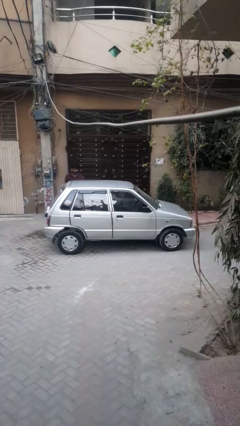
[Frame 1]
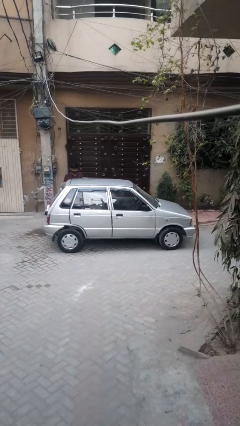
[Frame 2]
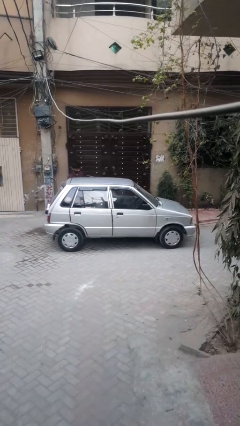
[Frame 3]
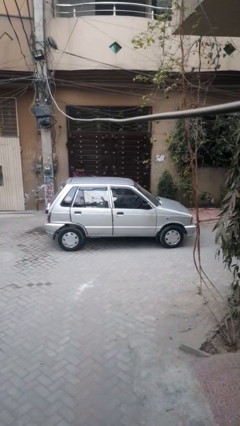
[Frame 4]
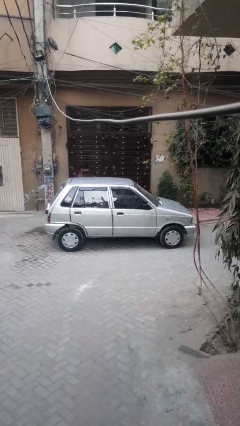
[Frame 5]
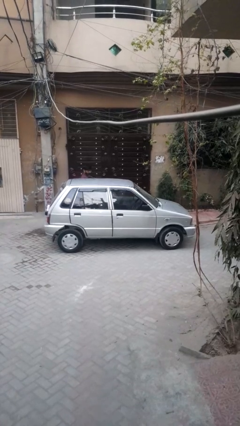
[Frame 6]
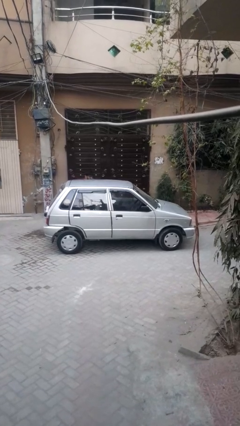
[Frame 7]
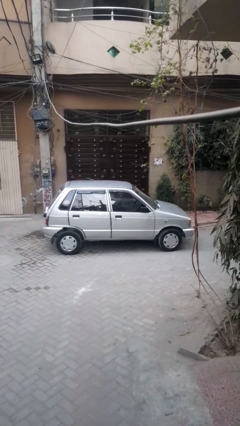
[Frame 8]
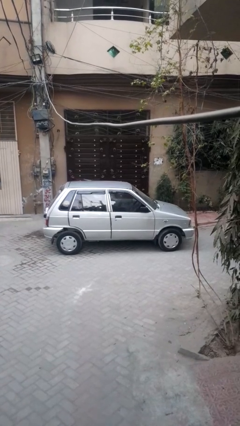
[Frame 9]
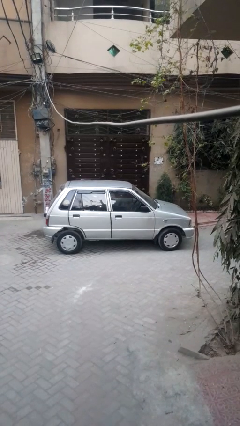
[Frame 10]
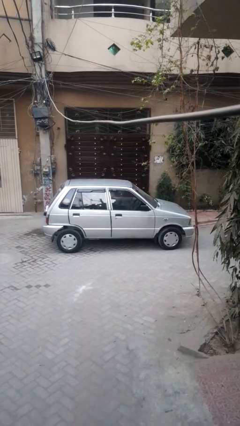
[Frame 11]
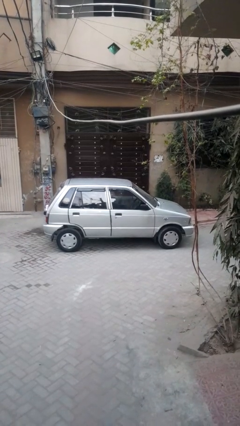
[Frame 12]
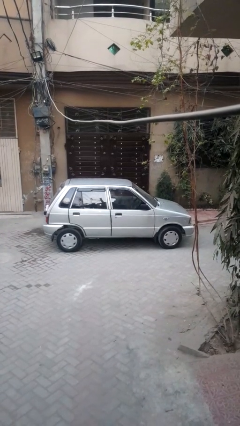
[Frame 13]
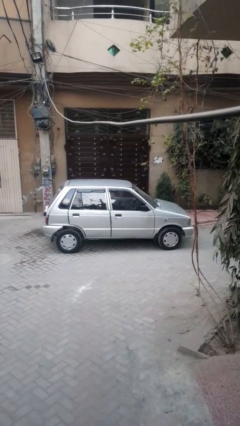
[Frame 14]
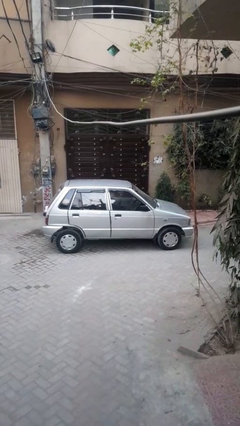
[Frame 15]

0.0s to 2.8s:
car picks up person

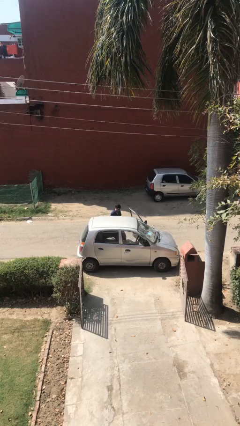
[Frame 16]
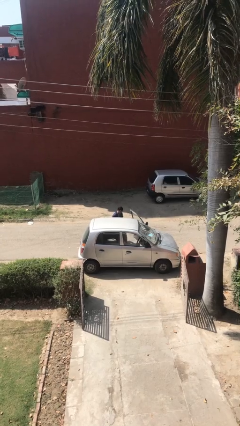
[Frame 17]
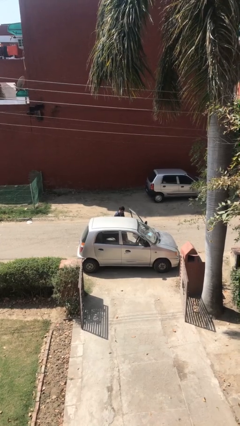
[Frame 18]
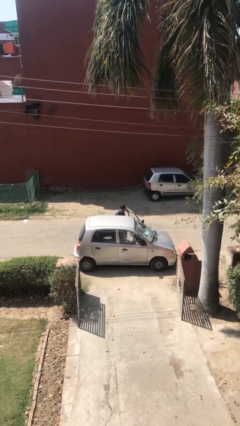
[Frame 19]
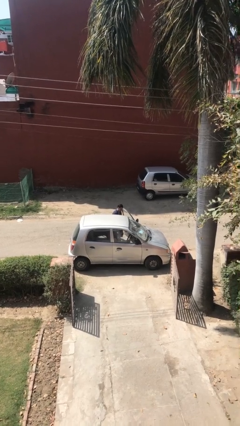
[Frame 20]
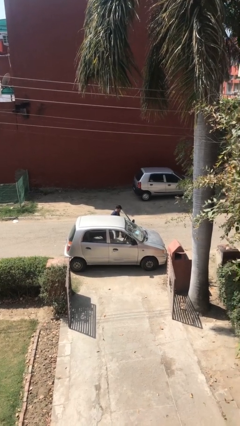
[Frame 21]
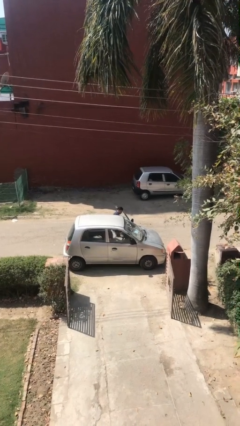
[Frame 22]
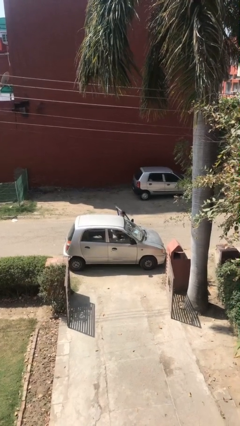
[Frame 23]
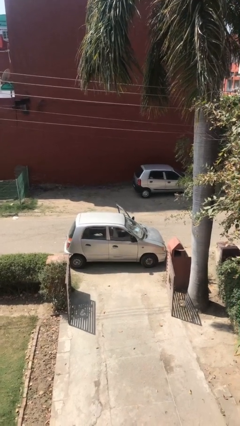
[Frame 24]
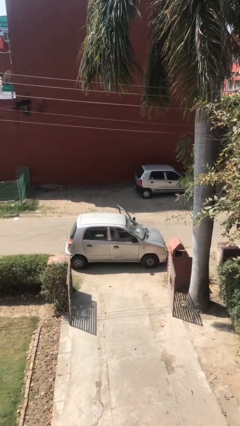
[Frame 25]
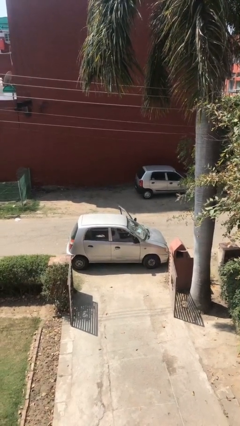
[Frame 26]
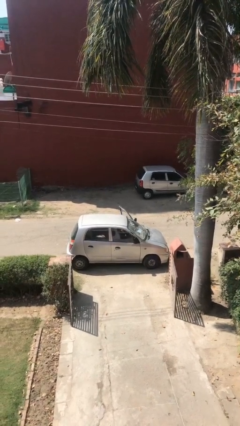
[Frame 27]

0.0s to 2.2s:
person enters car

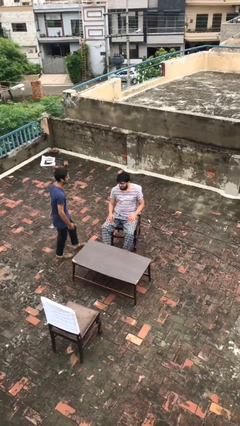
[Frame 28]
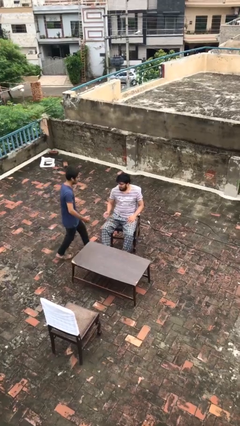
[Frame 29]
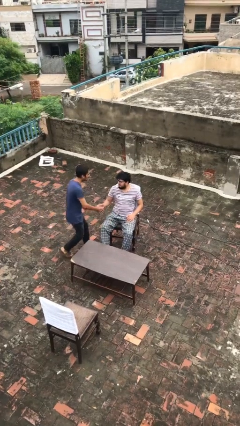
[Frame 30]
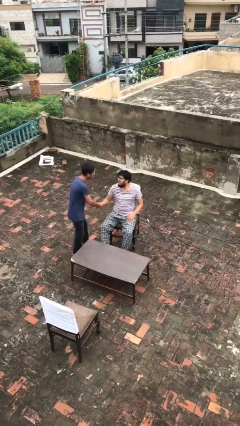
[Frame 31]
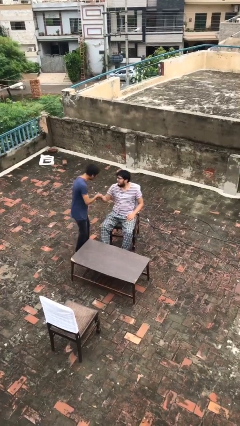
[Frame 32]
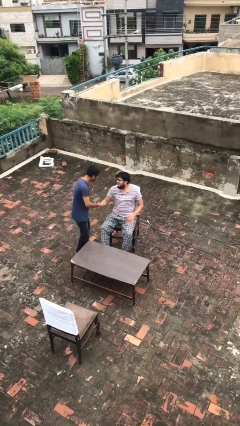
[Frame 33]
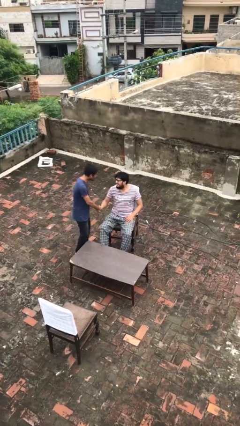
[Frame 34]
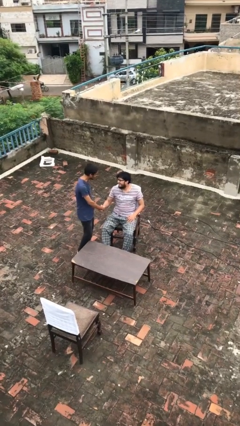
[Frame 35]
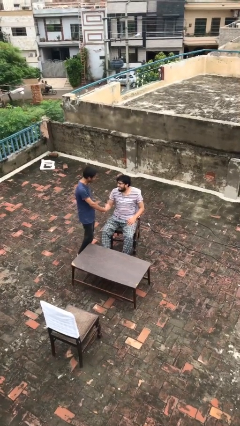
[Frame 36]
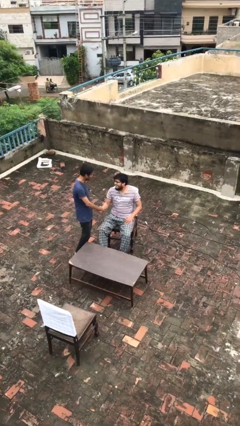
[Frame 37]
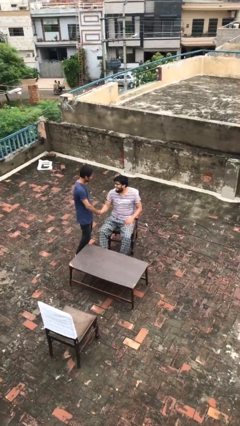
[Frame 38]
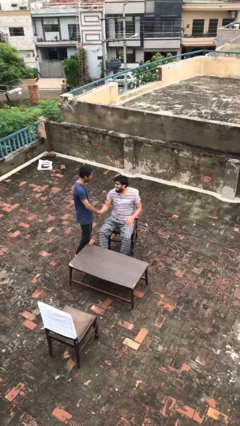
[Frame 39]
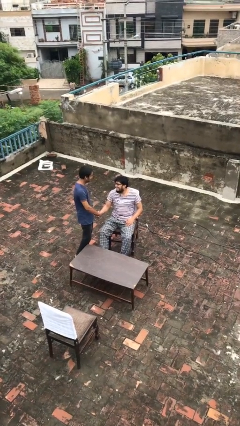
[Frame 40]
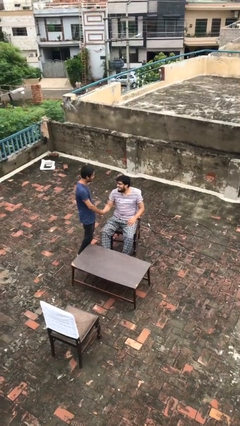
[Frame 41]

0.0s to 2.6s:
person shakes hand

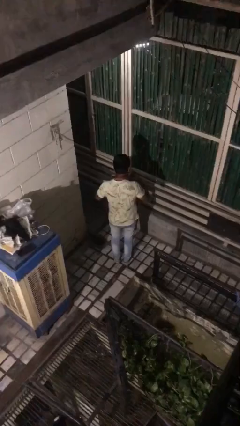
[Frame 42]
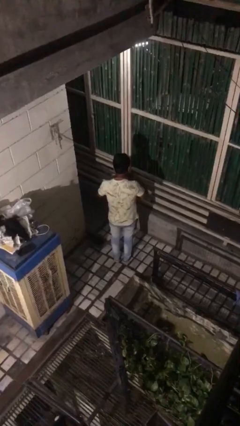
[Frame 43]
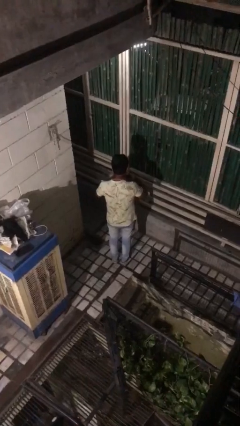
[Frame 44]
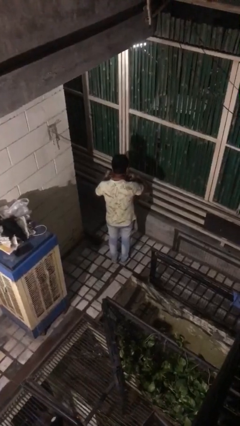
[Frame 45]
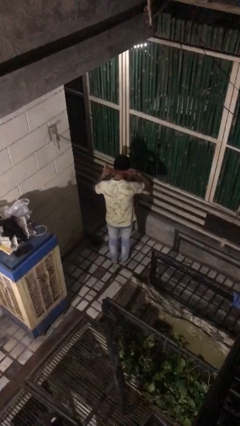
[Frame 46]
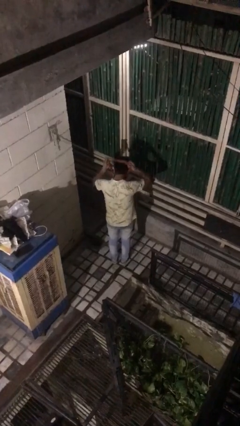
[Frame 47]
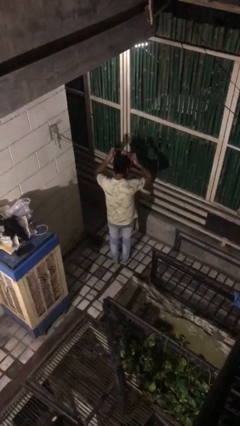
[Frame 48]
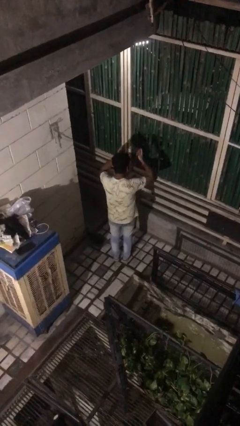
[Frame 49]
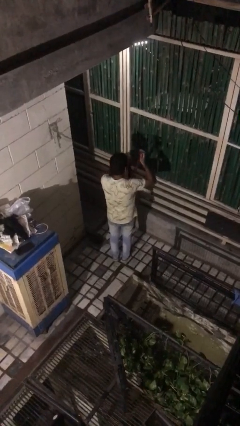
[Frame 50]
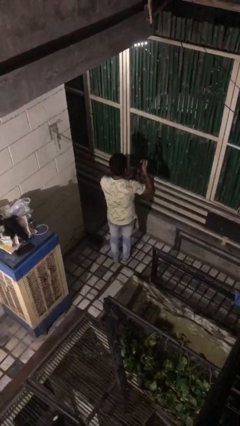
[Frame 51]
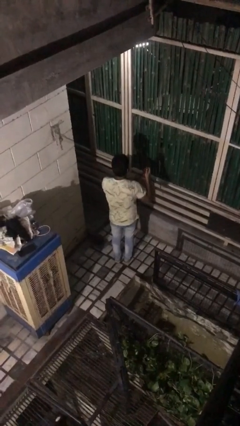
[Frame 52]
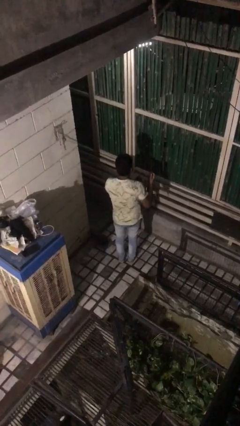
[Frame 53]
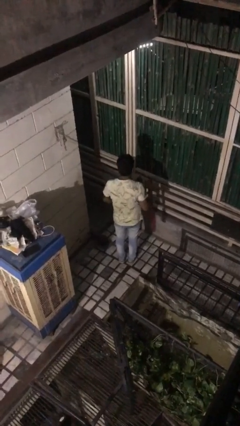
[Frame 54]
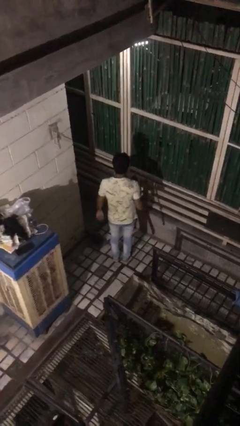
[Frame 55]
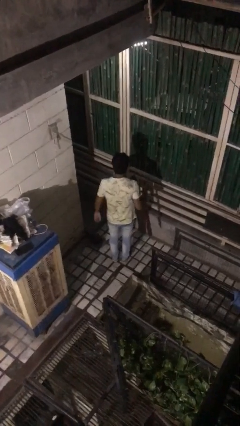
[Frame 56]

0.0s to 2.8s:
person takes off necktie

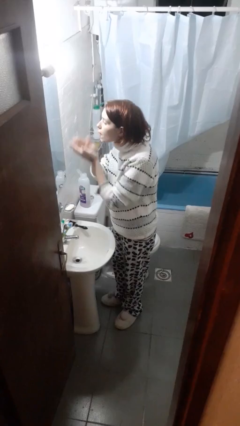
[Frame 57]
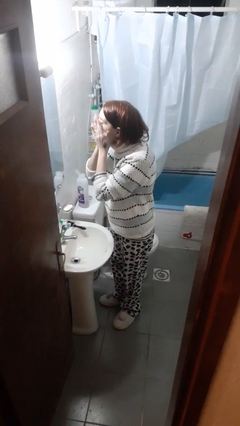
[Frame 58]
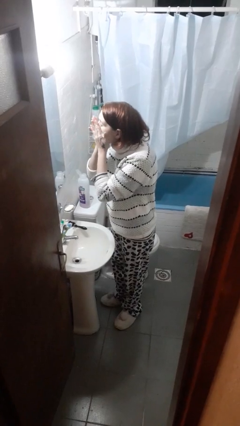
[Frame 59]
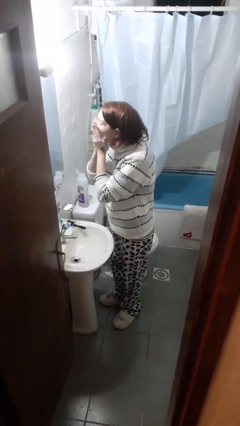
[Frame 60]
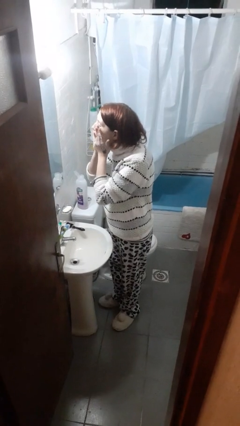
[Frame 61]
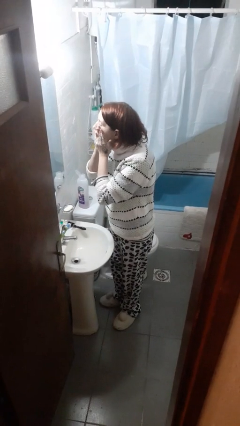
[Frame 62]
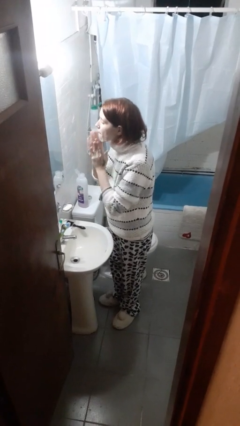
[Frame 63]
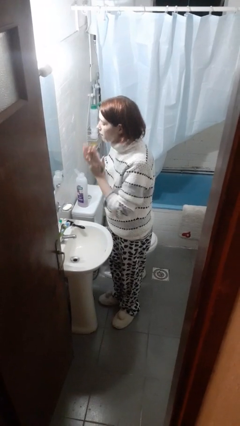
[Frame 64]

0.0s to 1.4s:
person applies shaving cream

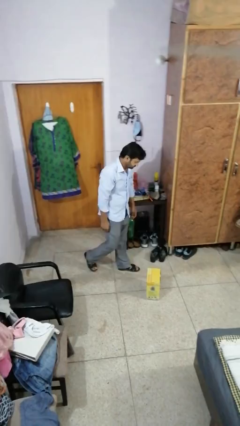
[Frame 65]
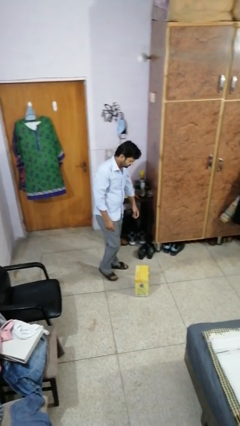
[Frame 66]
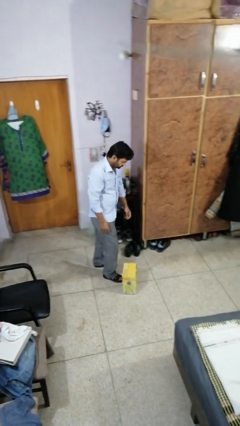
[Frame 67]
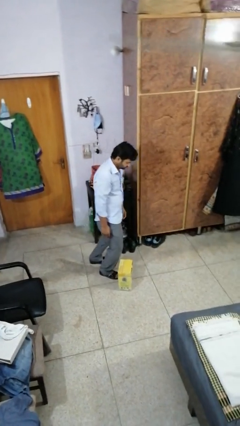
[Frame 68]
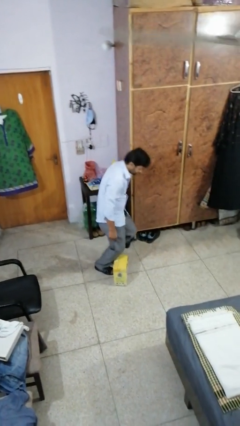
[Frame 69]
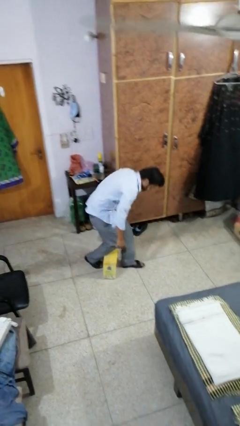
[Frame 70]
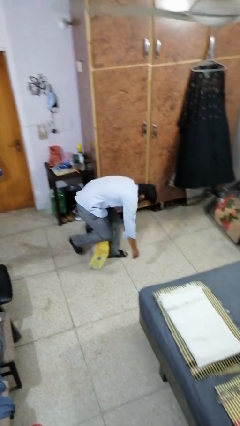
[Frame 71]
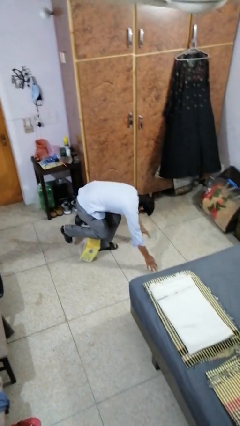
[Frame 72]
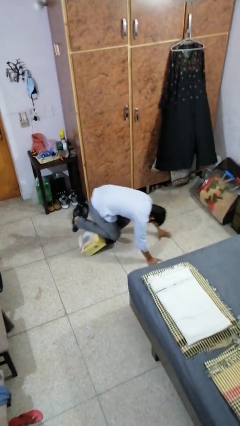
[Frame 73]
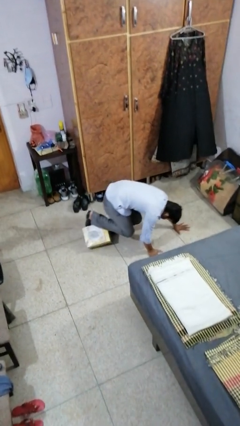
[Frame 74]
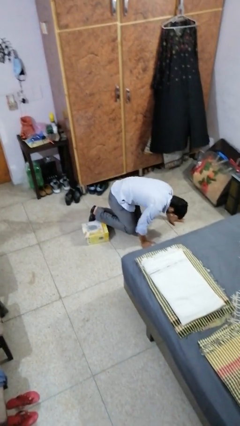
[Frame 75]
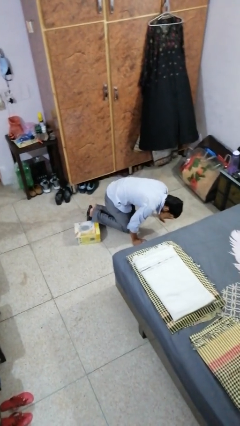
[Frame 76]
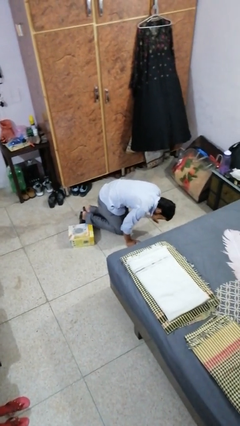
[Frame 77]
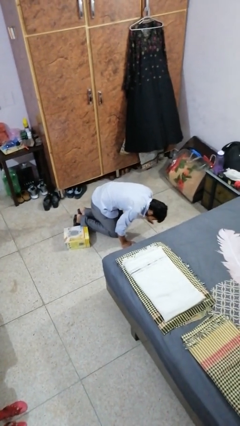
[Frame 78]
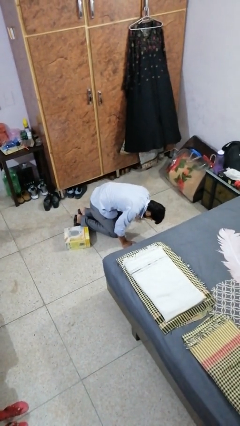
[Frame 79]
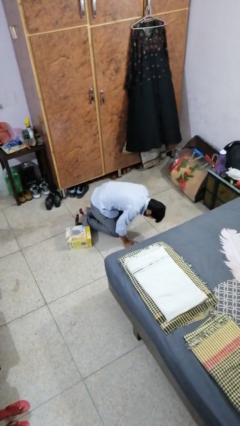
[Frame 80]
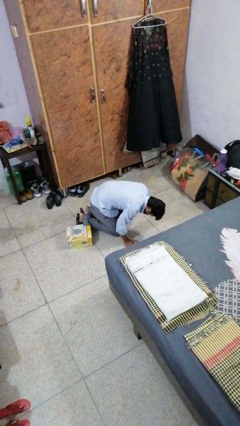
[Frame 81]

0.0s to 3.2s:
person trips on object on floor

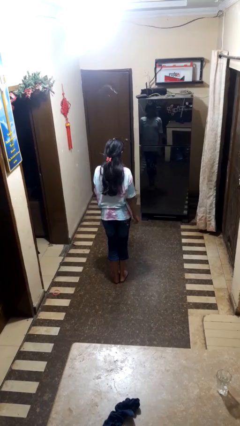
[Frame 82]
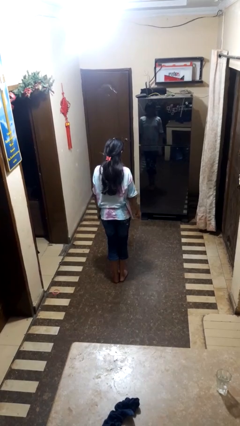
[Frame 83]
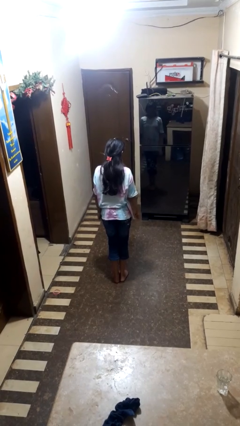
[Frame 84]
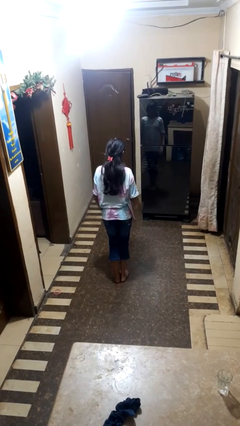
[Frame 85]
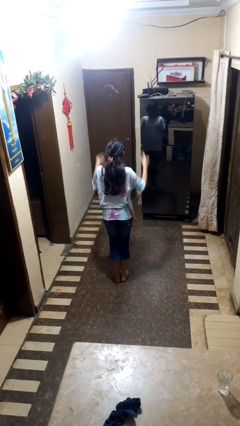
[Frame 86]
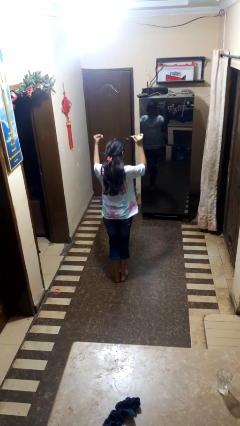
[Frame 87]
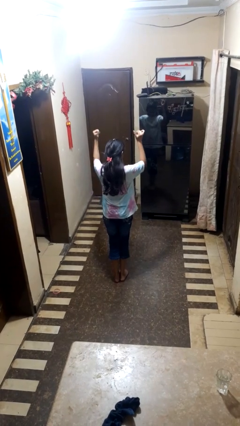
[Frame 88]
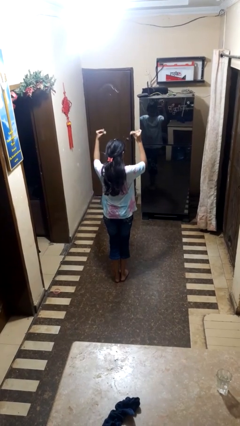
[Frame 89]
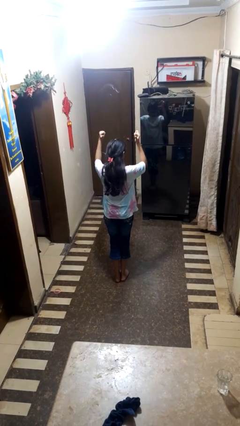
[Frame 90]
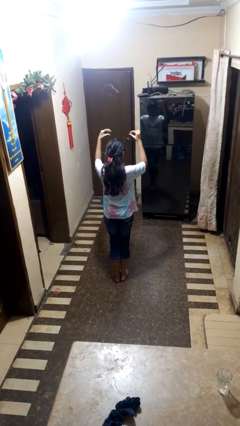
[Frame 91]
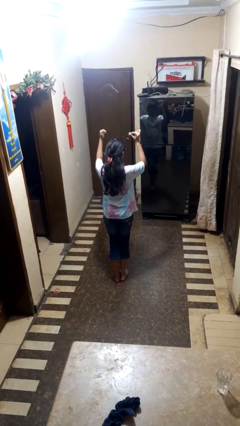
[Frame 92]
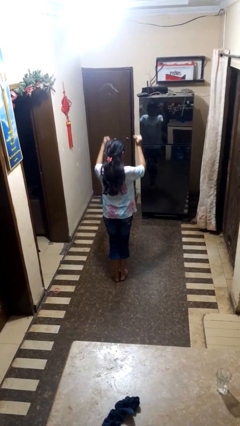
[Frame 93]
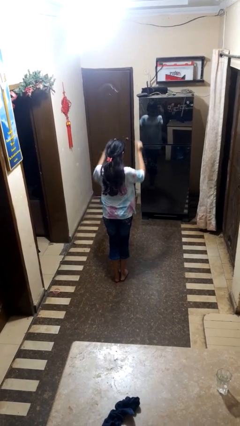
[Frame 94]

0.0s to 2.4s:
person snaps fingers
